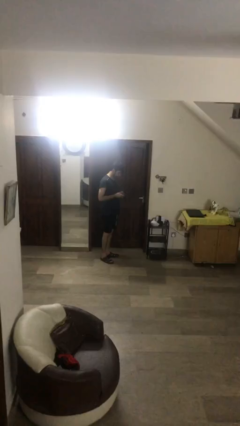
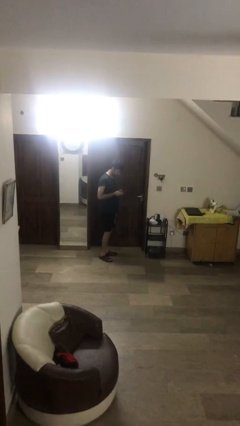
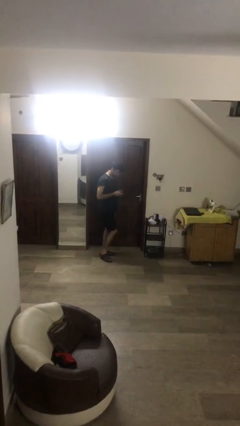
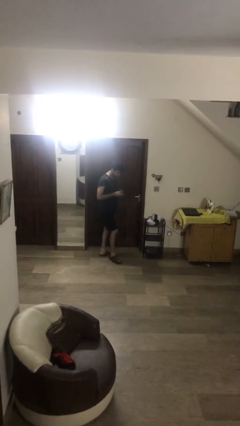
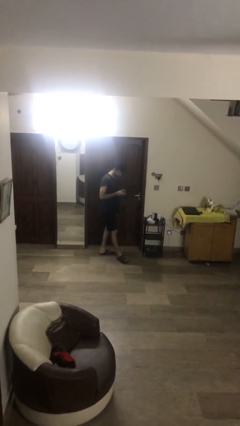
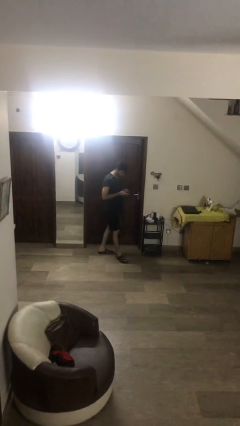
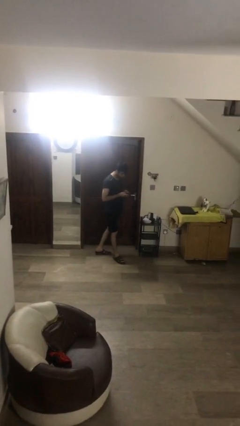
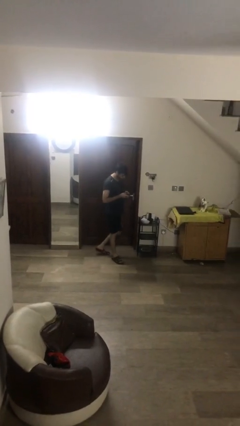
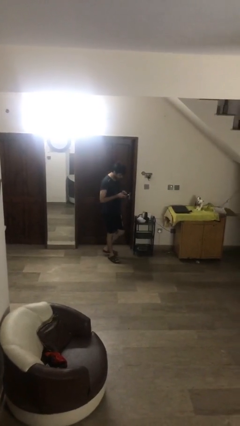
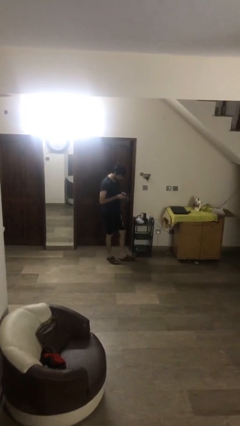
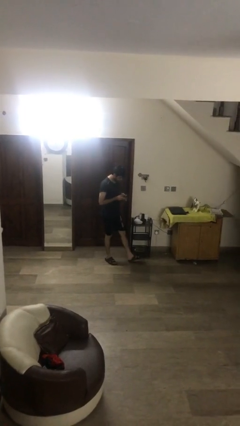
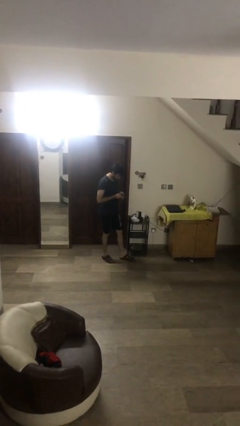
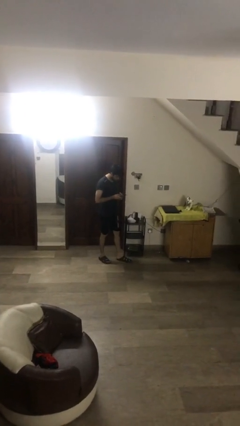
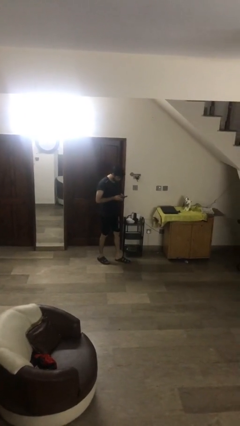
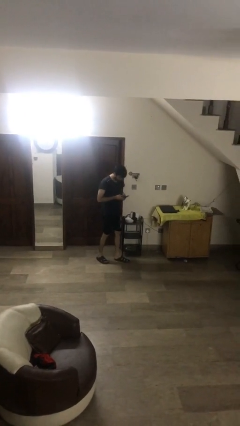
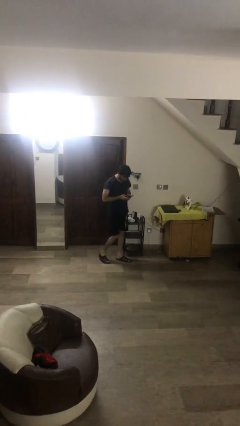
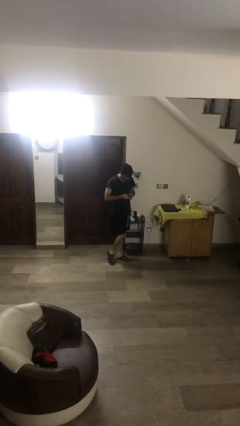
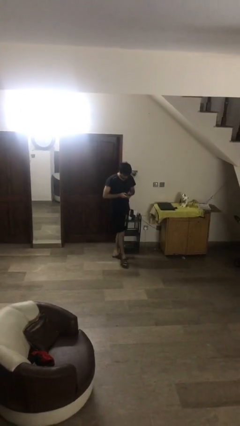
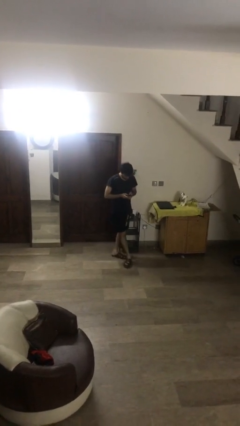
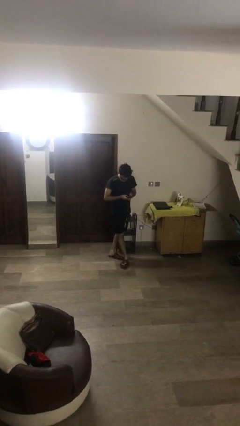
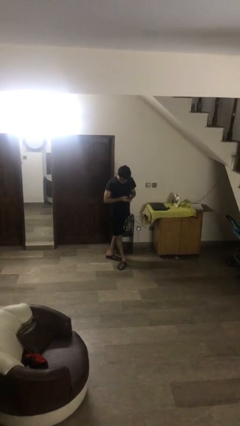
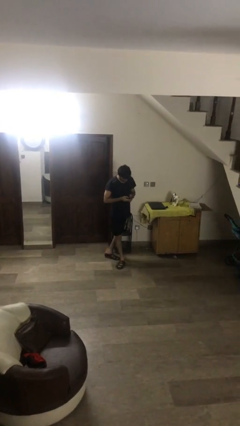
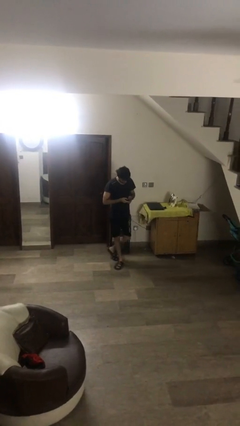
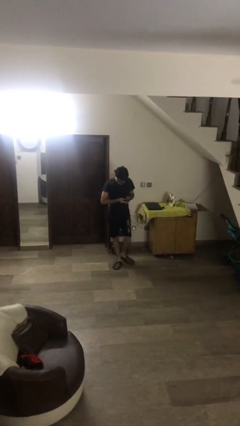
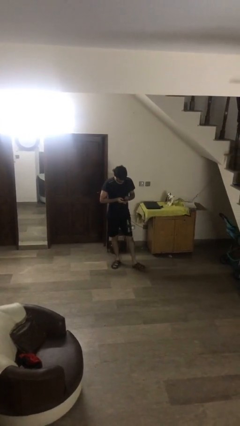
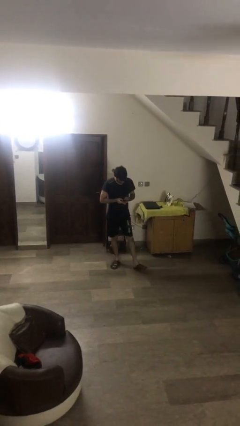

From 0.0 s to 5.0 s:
person texts on phone

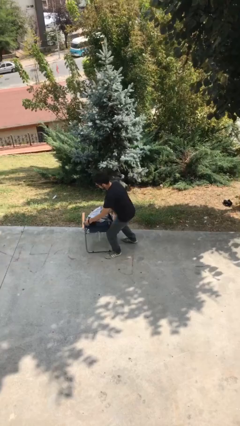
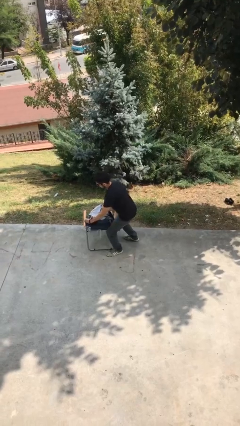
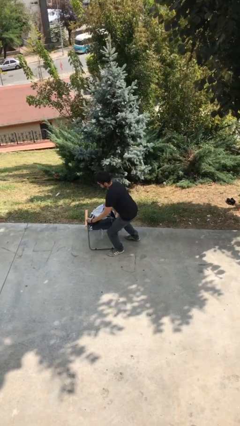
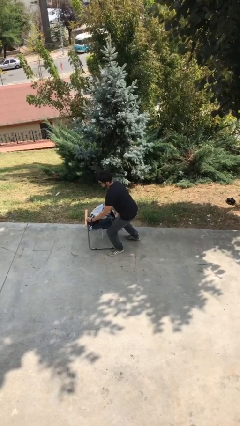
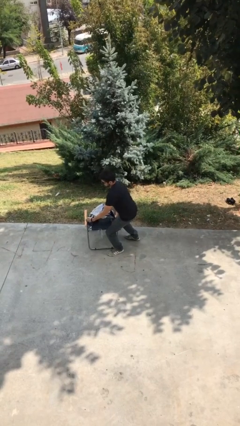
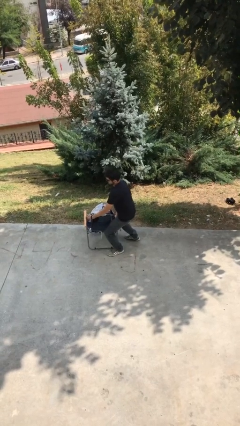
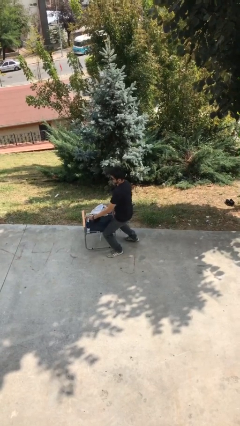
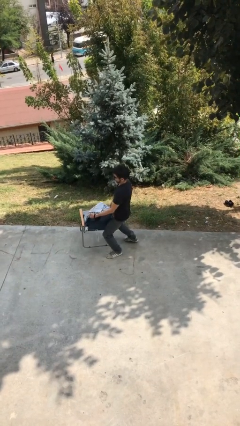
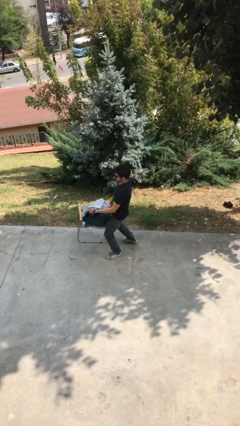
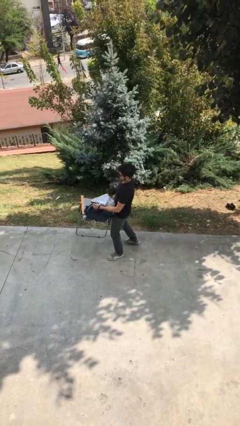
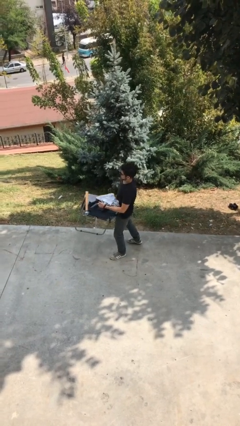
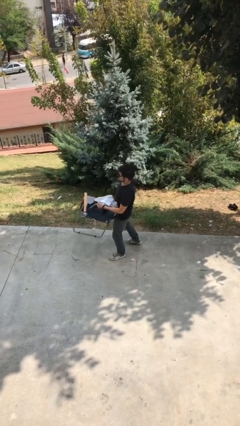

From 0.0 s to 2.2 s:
person picks up object from floor

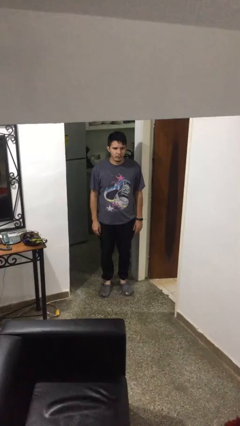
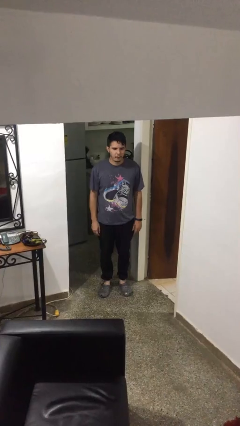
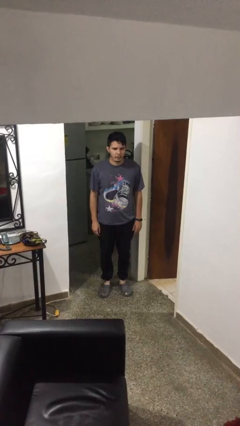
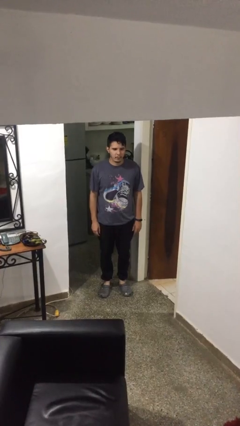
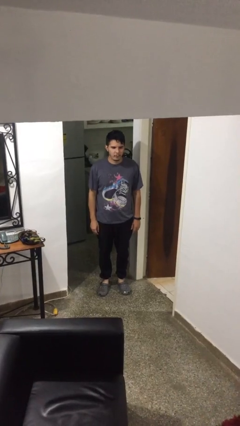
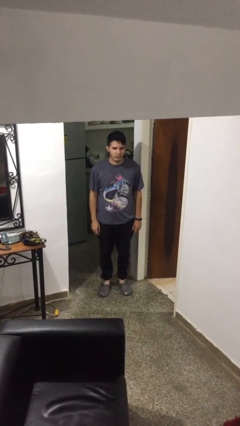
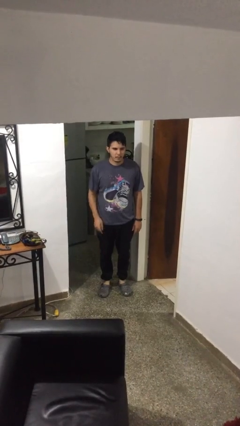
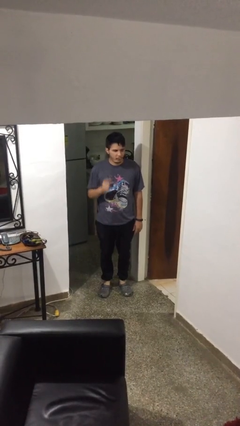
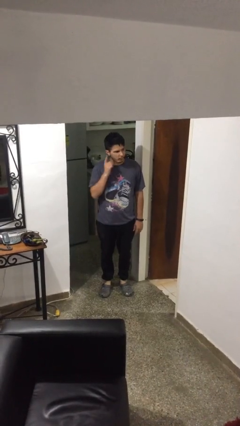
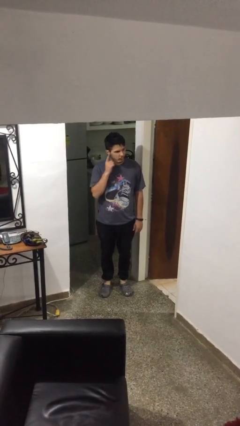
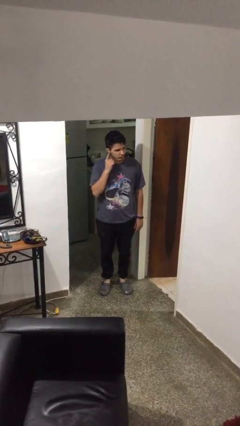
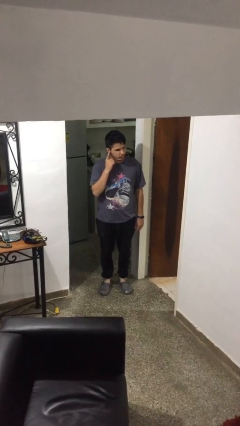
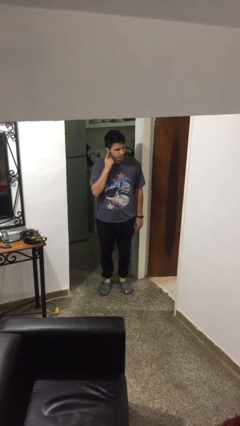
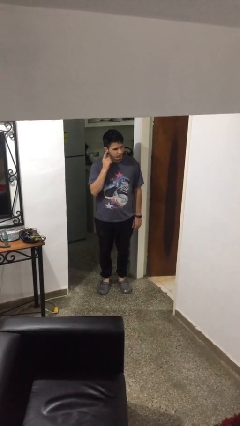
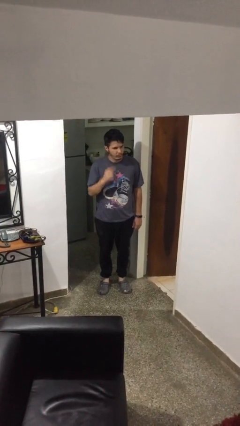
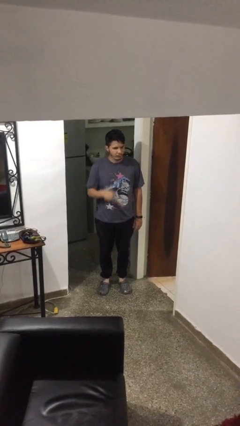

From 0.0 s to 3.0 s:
person gestures listen closely

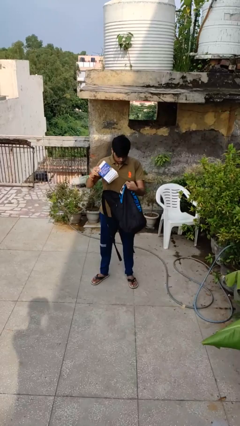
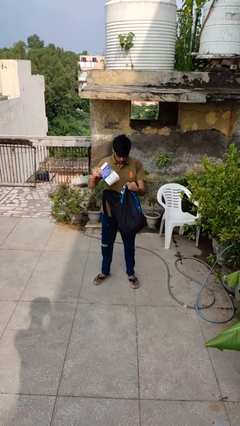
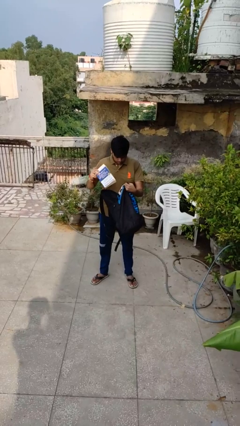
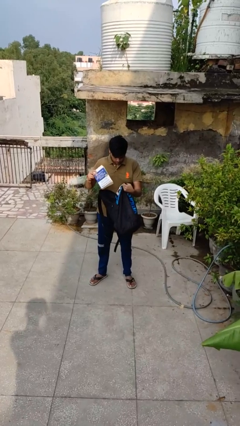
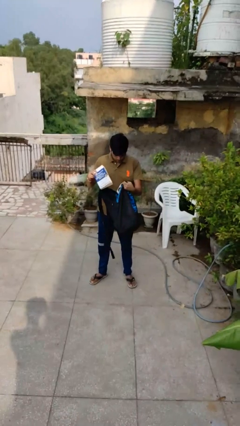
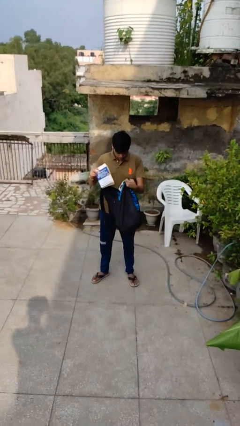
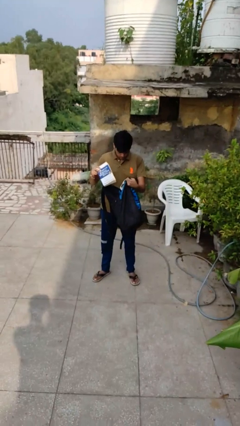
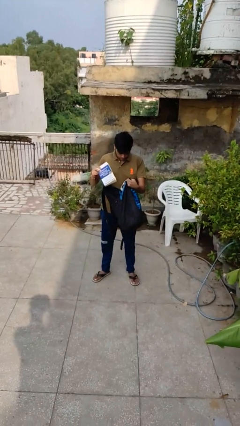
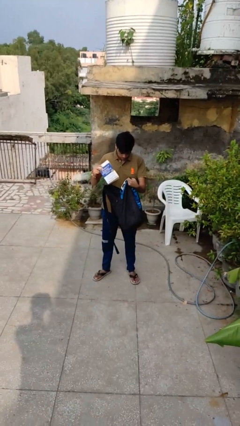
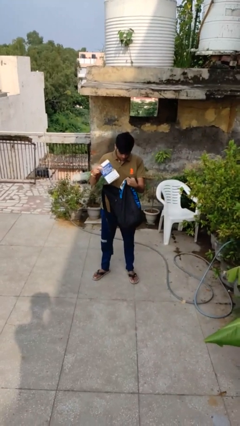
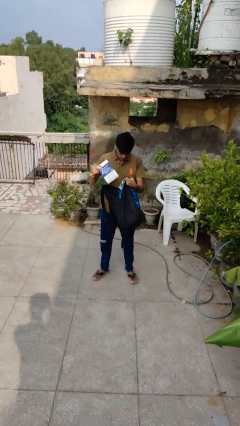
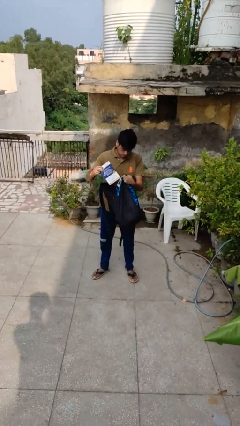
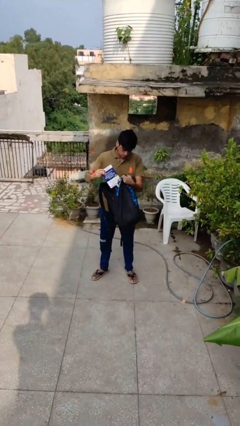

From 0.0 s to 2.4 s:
person takes object from backpack

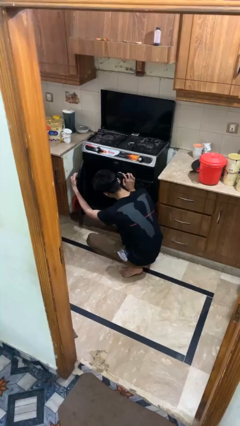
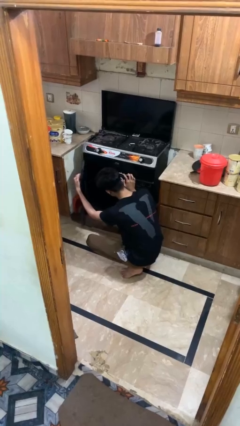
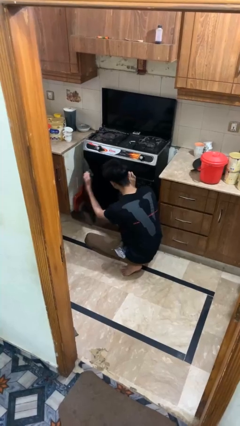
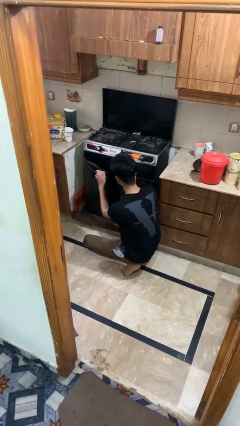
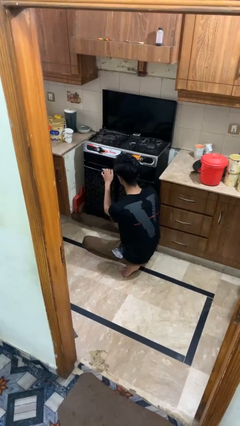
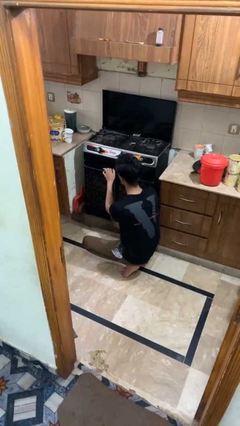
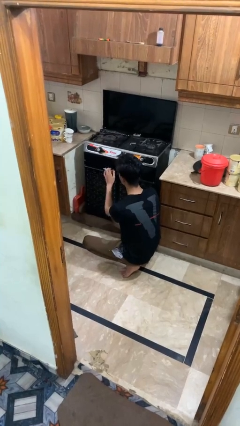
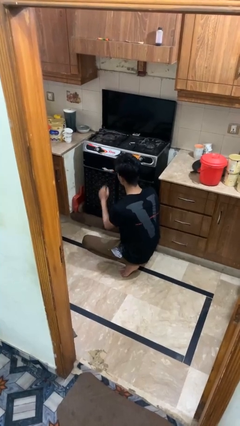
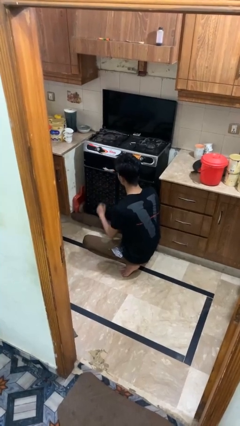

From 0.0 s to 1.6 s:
person closes oven door

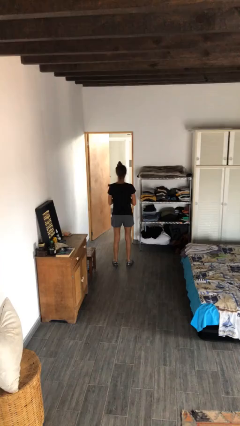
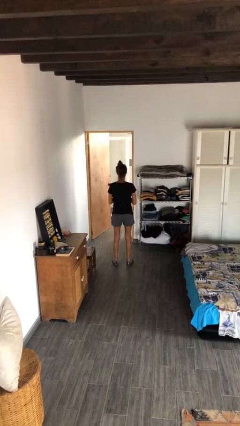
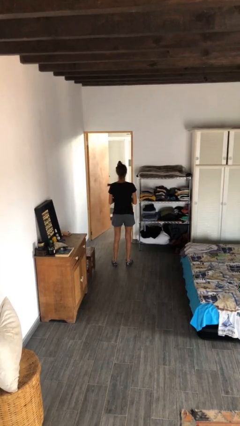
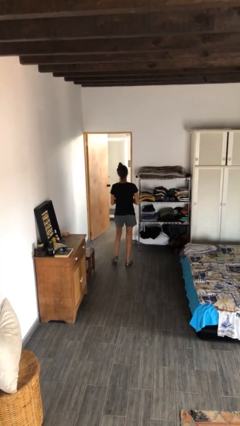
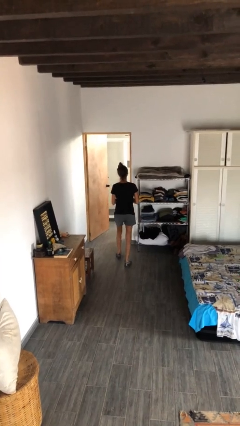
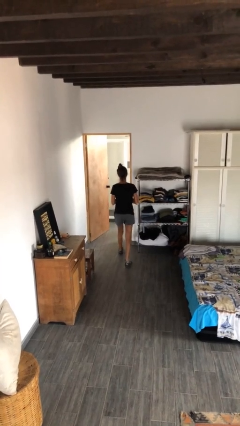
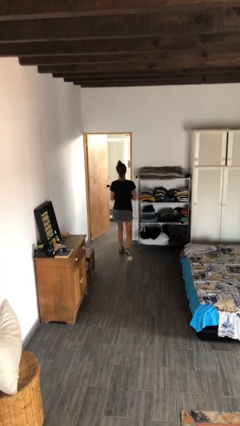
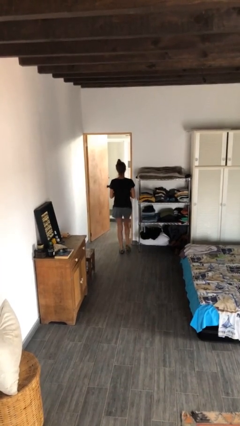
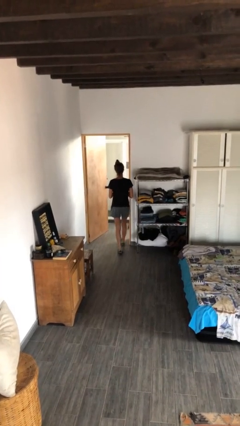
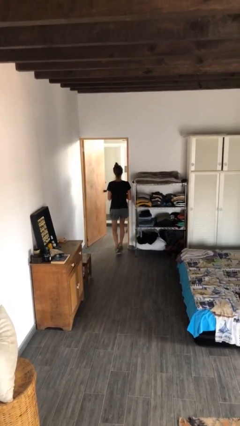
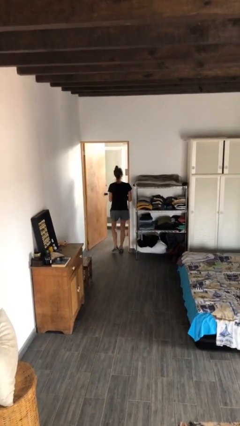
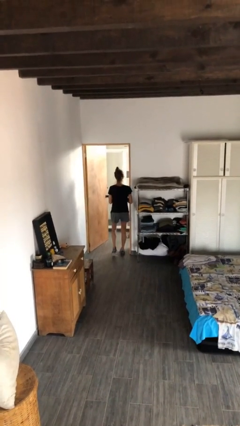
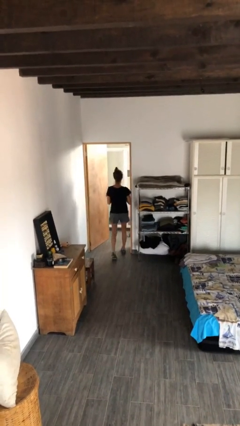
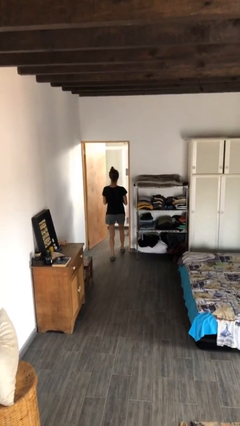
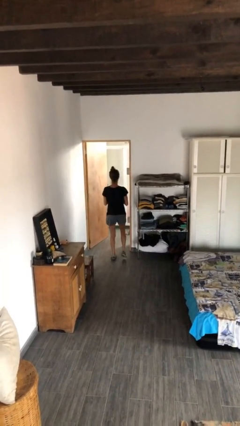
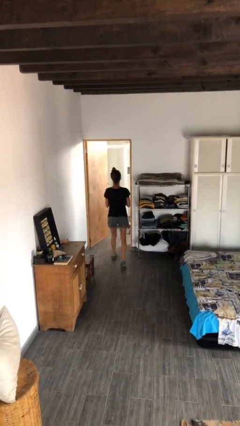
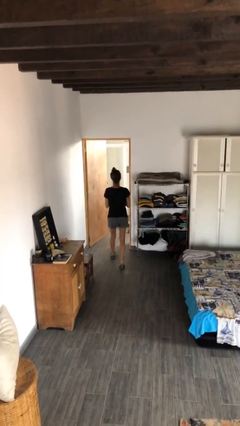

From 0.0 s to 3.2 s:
person bumps into wall
